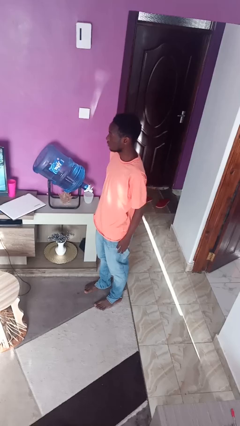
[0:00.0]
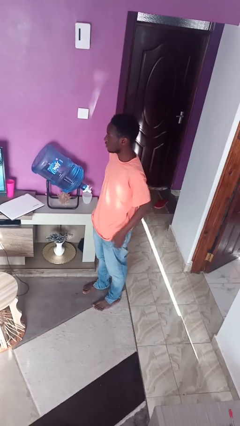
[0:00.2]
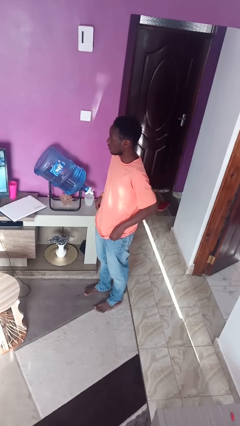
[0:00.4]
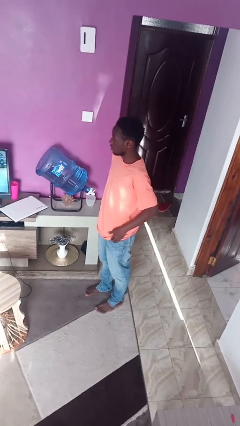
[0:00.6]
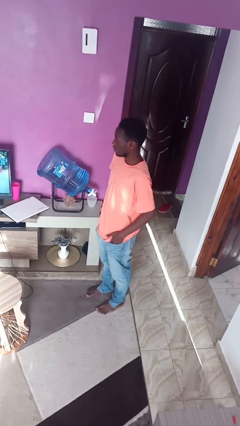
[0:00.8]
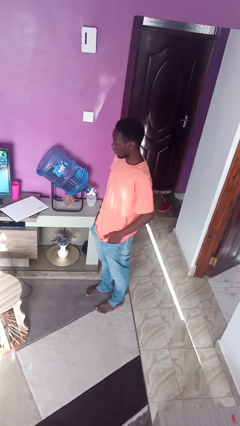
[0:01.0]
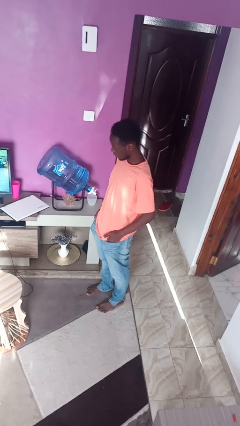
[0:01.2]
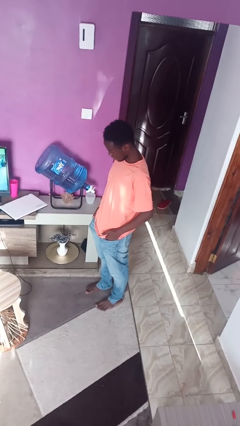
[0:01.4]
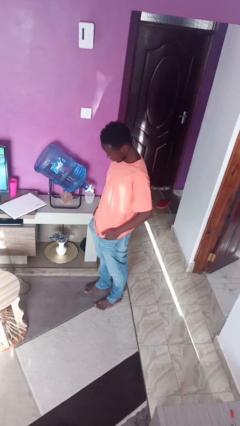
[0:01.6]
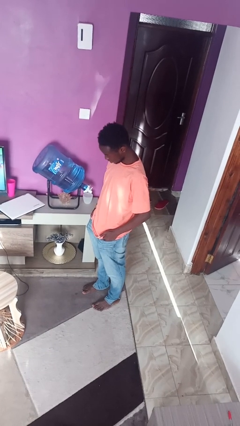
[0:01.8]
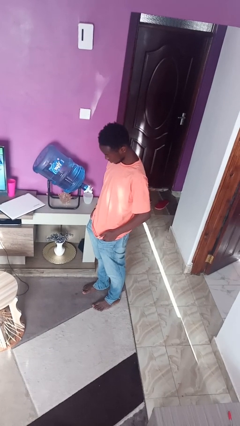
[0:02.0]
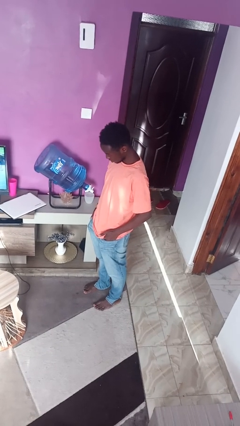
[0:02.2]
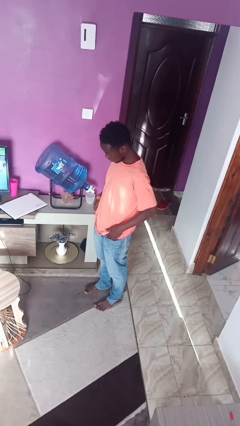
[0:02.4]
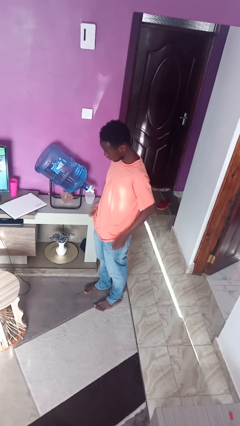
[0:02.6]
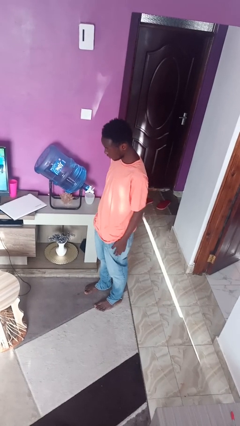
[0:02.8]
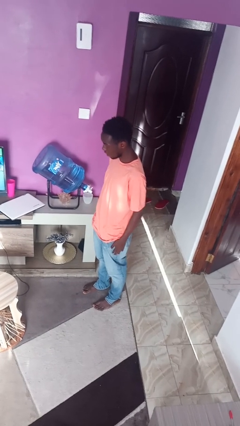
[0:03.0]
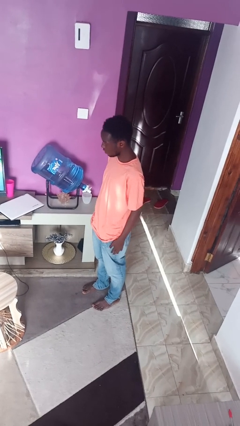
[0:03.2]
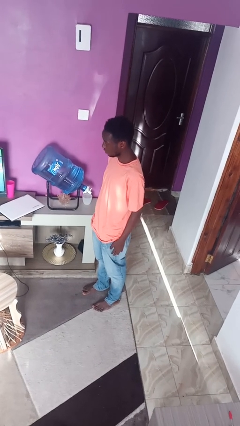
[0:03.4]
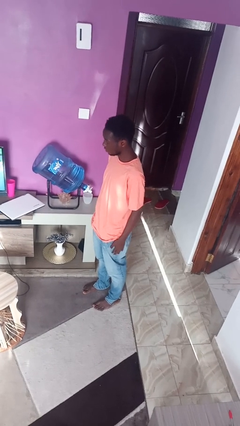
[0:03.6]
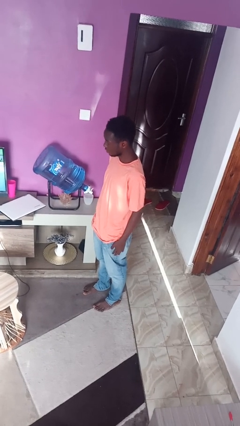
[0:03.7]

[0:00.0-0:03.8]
person puts hands in back pockets

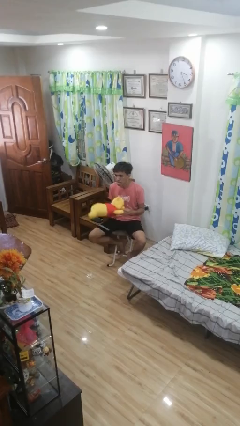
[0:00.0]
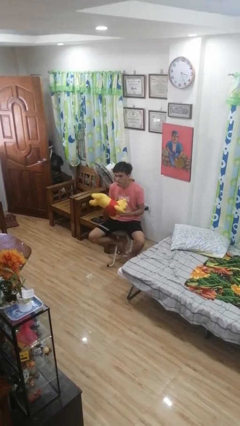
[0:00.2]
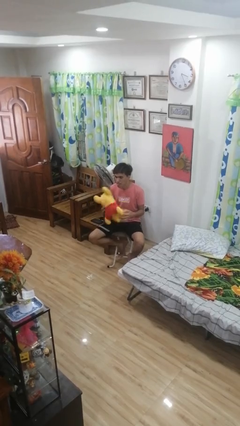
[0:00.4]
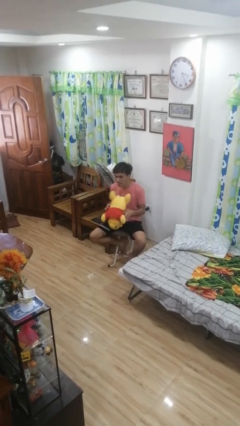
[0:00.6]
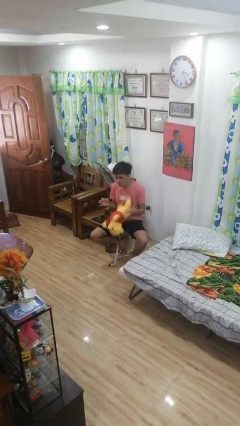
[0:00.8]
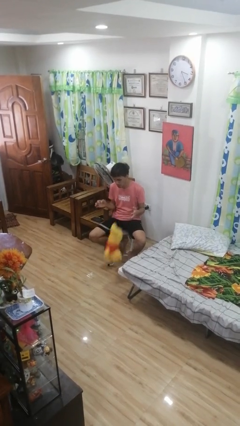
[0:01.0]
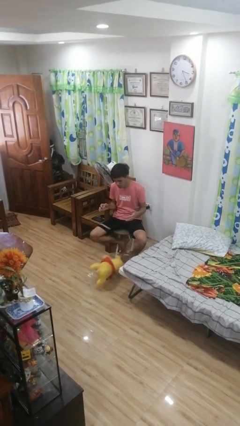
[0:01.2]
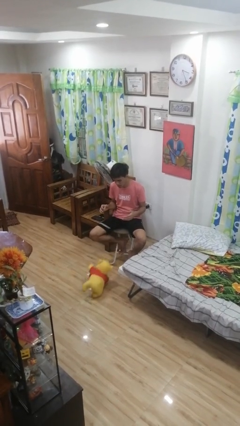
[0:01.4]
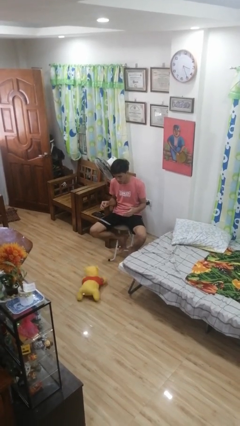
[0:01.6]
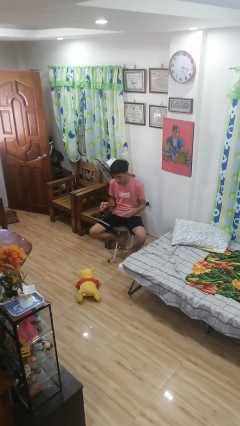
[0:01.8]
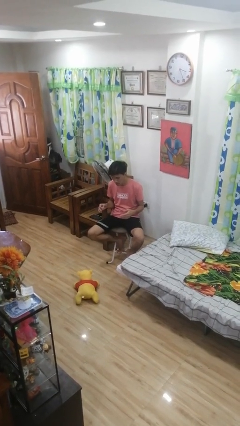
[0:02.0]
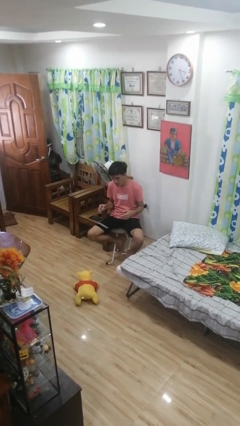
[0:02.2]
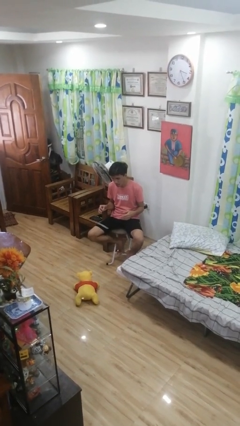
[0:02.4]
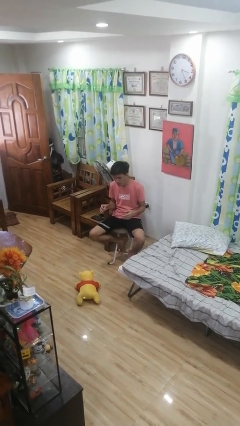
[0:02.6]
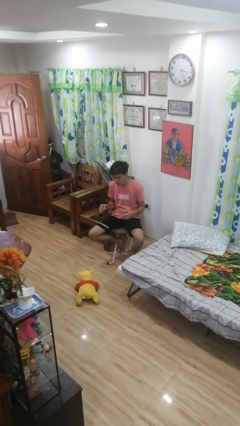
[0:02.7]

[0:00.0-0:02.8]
person drops object

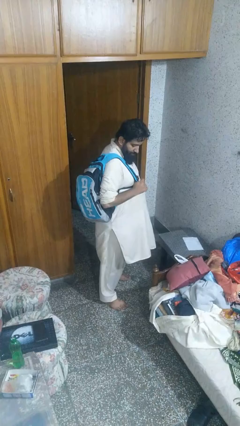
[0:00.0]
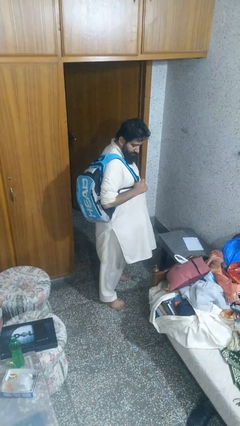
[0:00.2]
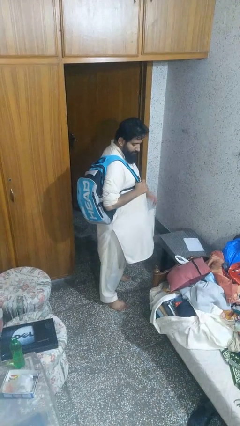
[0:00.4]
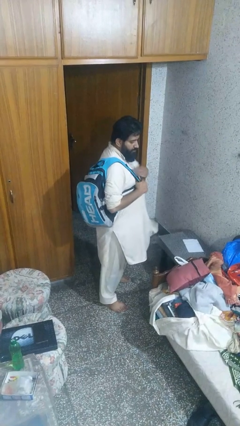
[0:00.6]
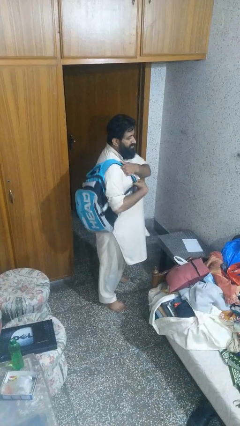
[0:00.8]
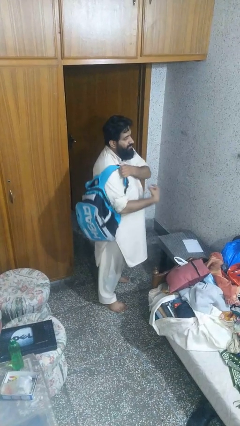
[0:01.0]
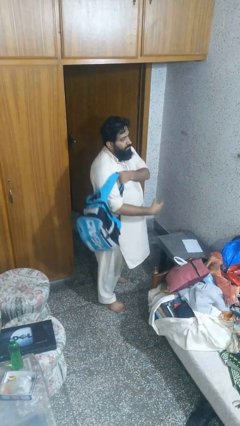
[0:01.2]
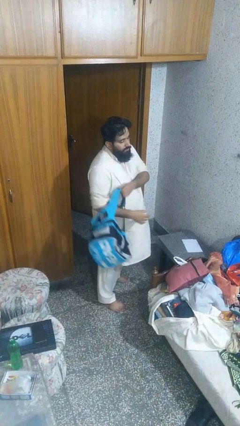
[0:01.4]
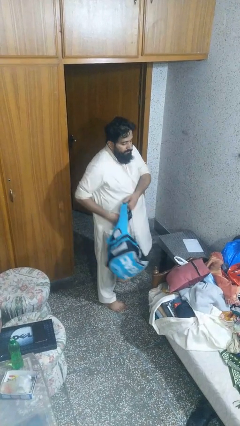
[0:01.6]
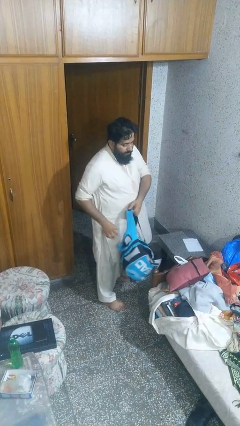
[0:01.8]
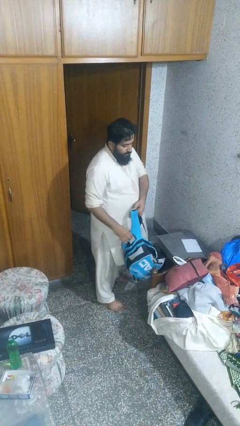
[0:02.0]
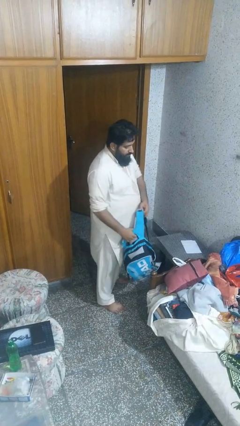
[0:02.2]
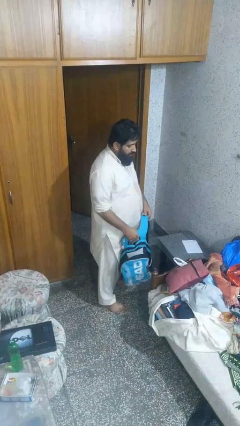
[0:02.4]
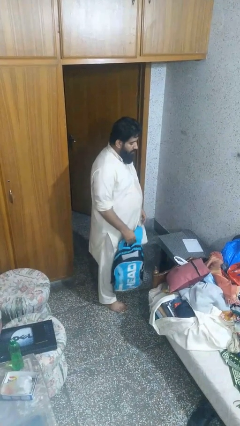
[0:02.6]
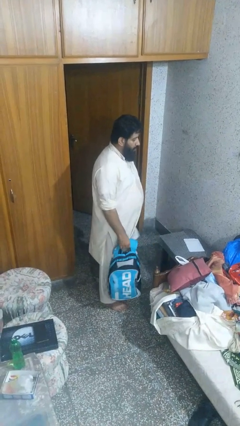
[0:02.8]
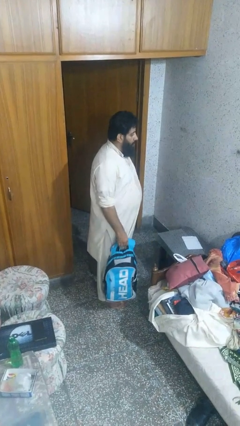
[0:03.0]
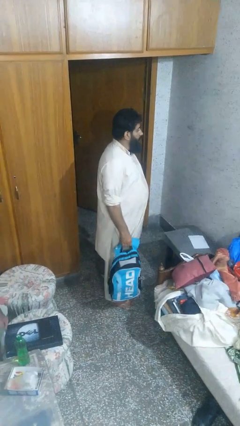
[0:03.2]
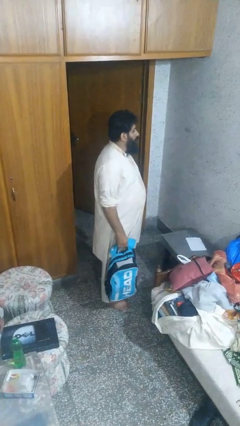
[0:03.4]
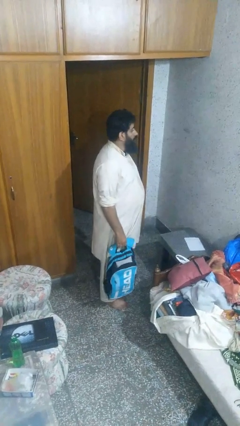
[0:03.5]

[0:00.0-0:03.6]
person takes off backpack

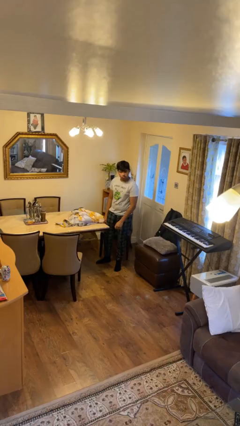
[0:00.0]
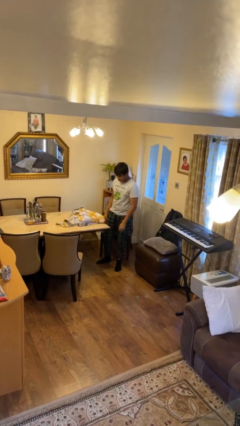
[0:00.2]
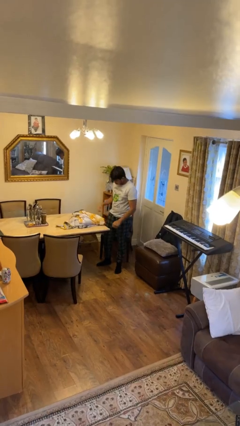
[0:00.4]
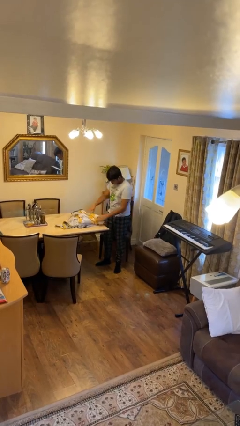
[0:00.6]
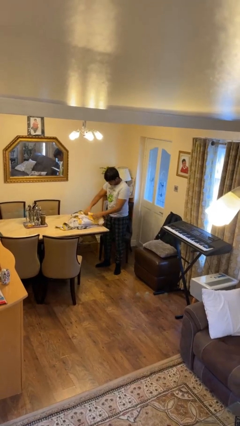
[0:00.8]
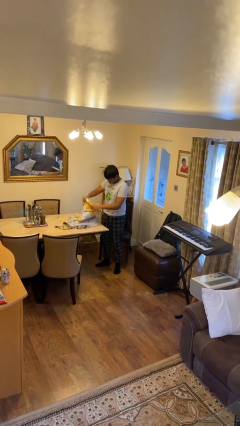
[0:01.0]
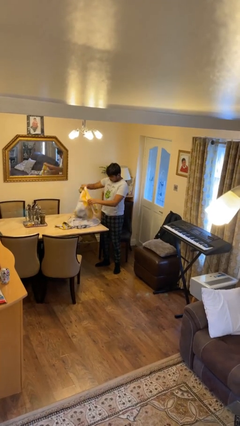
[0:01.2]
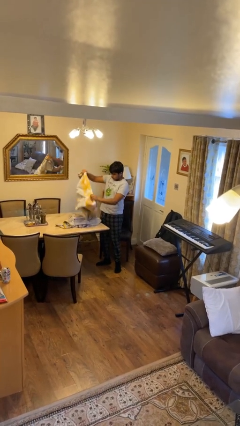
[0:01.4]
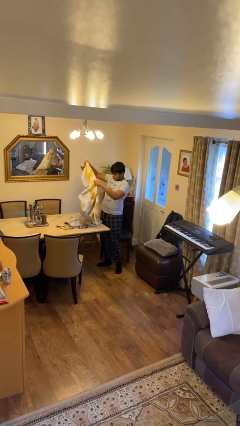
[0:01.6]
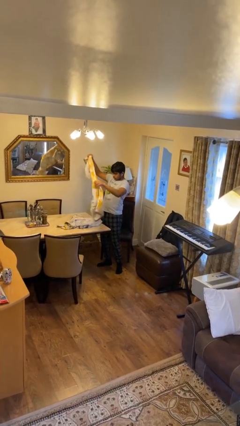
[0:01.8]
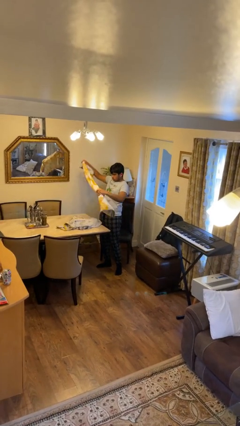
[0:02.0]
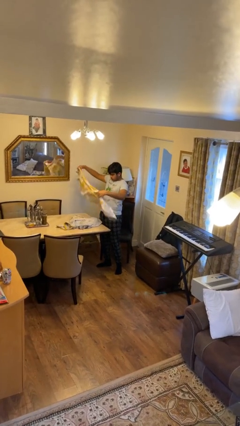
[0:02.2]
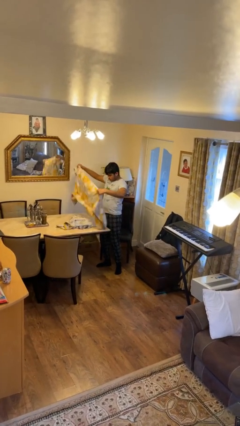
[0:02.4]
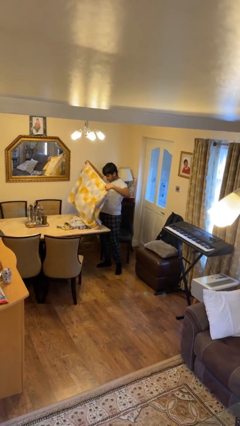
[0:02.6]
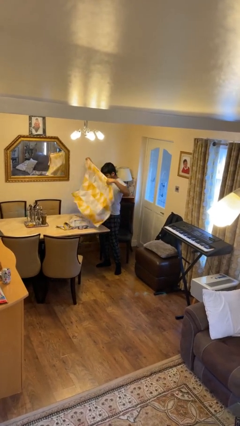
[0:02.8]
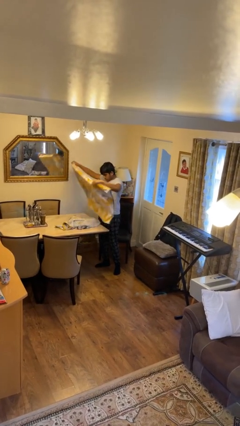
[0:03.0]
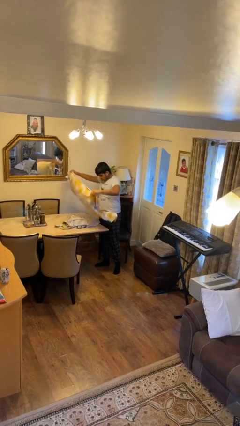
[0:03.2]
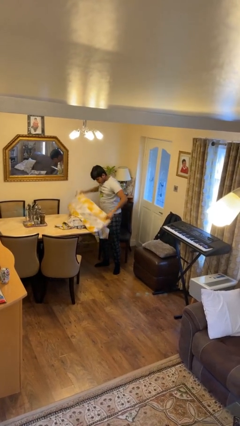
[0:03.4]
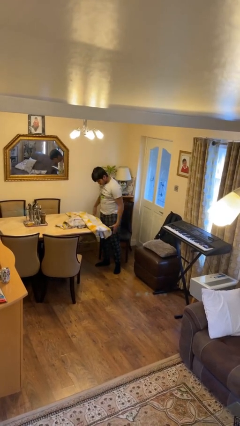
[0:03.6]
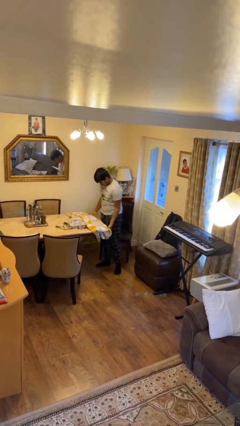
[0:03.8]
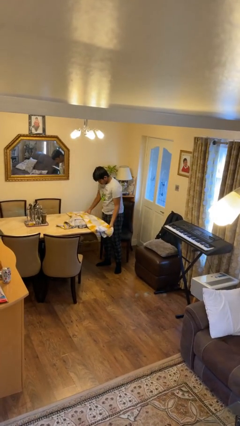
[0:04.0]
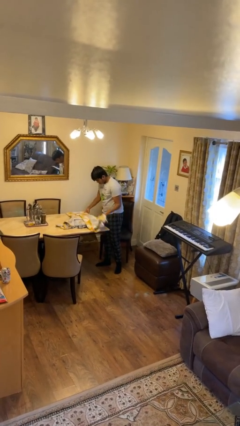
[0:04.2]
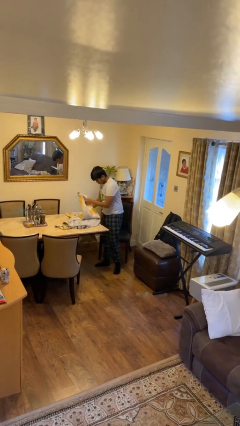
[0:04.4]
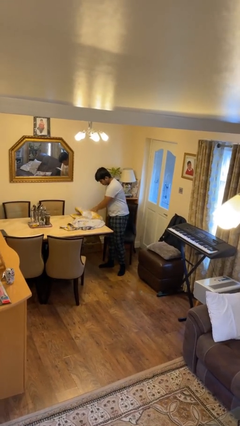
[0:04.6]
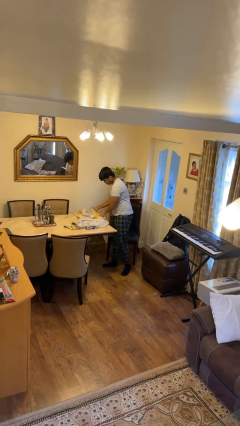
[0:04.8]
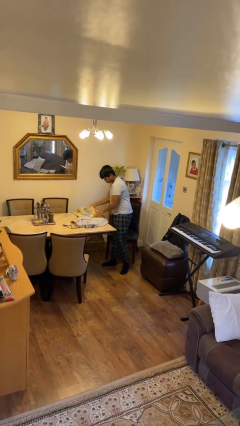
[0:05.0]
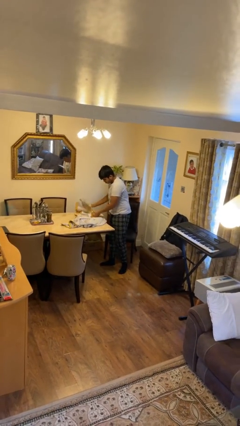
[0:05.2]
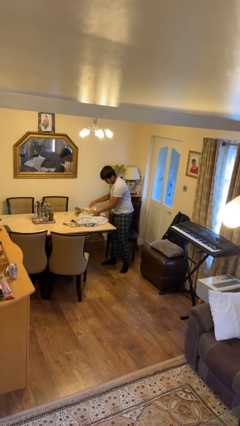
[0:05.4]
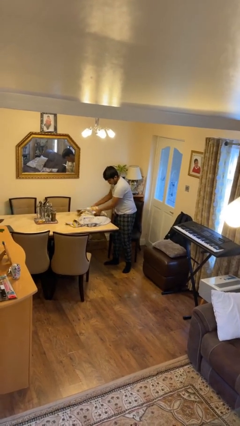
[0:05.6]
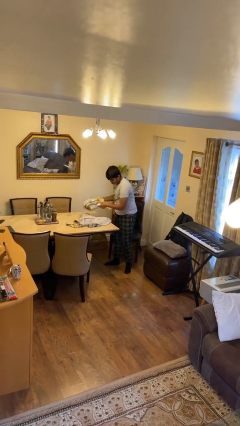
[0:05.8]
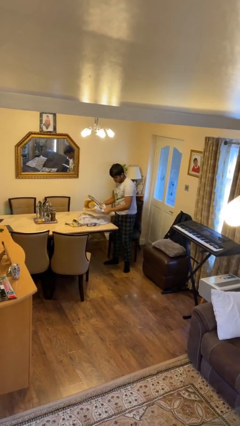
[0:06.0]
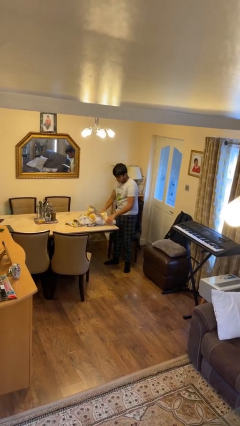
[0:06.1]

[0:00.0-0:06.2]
person folds towel

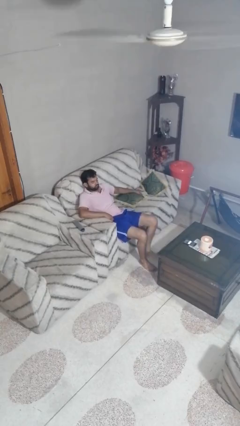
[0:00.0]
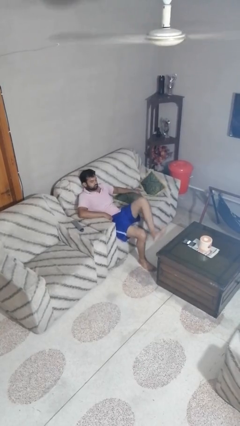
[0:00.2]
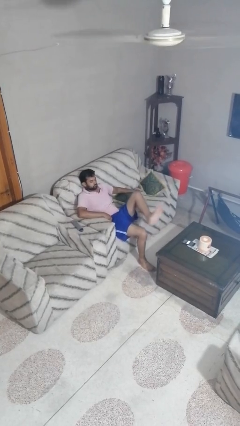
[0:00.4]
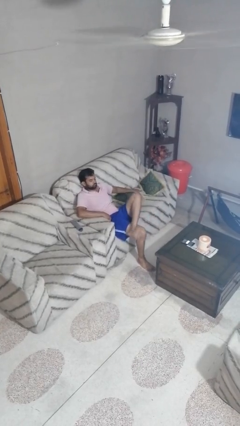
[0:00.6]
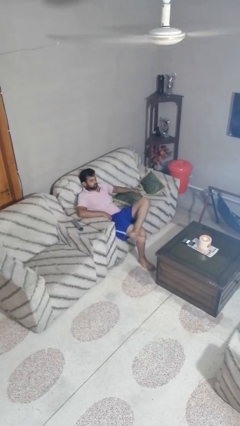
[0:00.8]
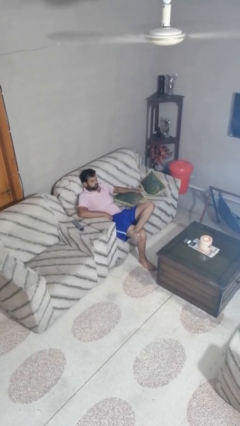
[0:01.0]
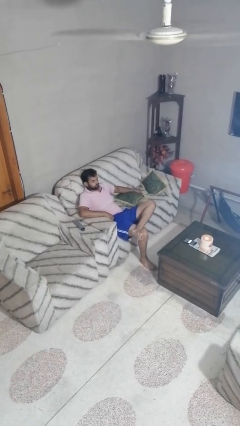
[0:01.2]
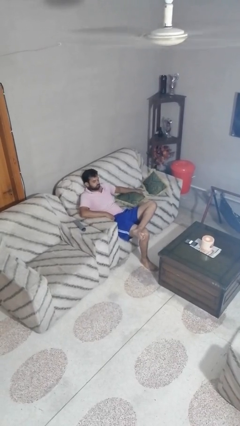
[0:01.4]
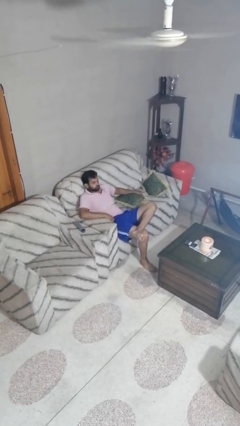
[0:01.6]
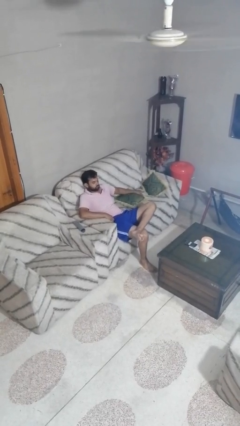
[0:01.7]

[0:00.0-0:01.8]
person crosses legs
